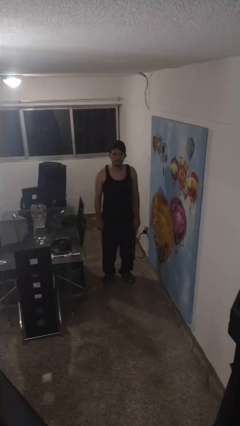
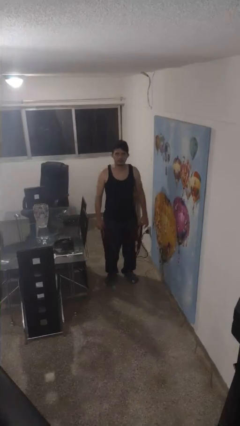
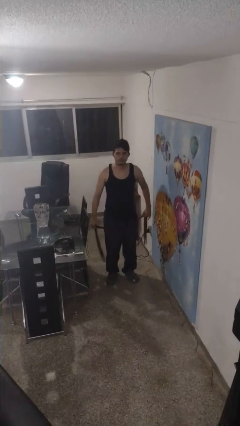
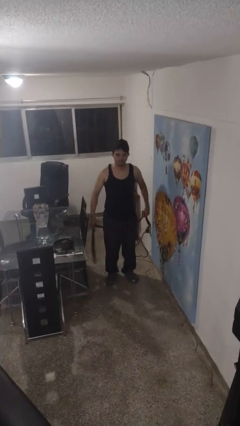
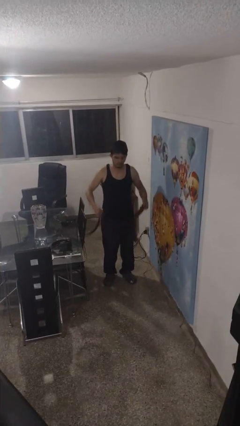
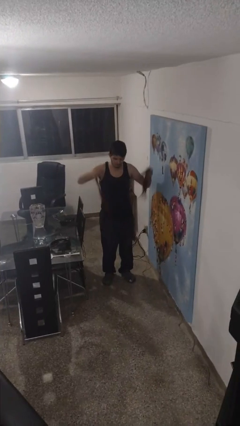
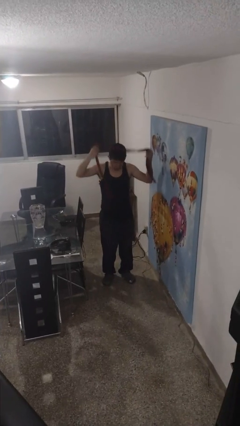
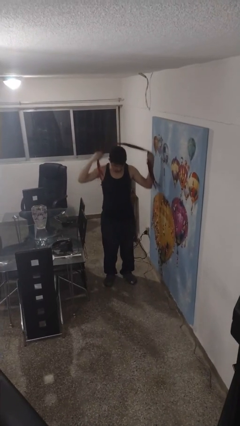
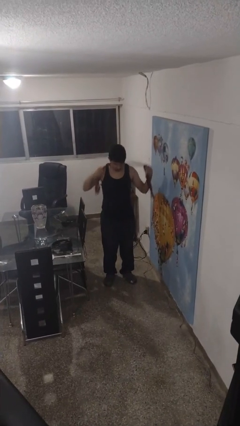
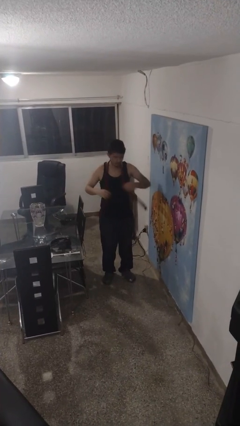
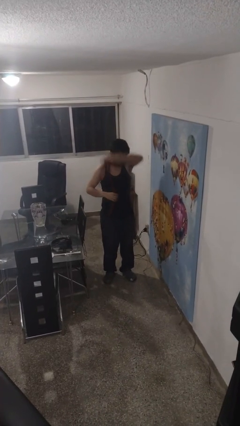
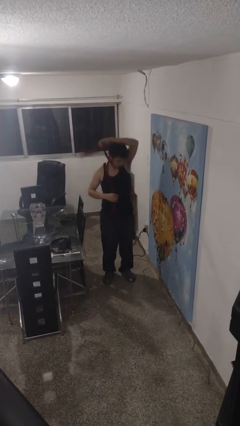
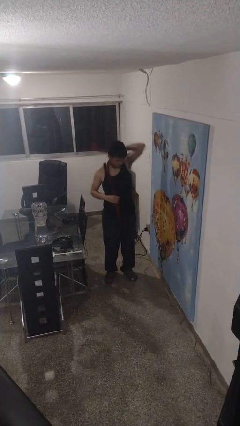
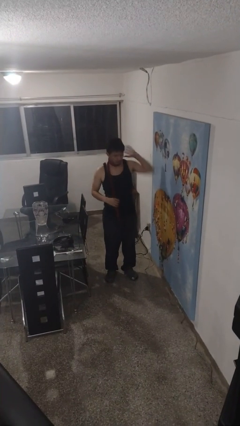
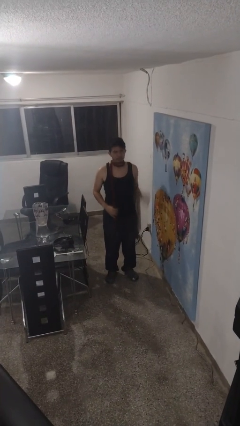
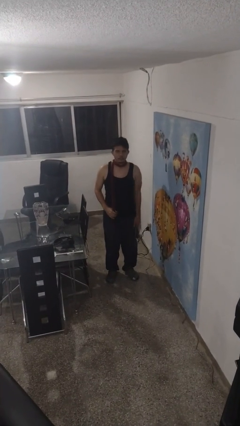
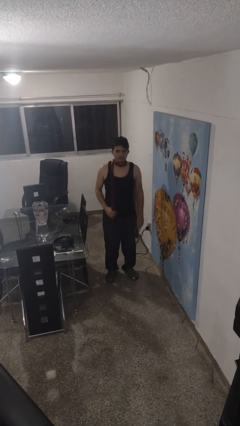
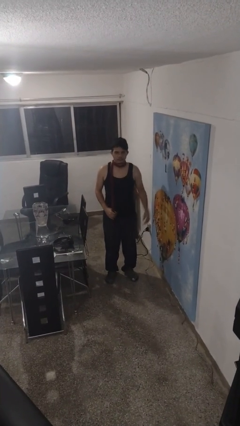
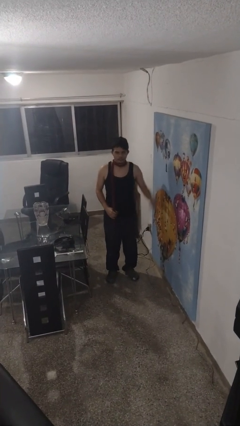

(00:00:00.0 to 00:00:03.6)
person puts on scarf

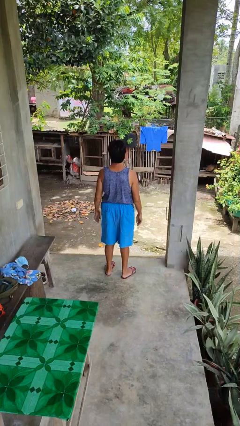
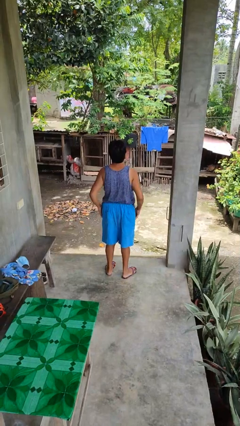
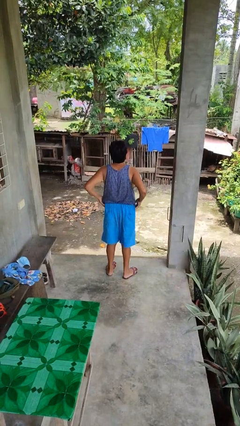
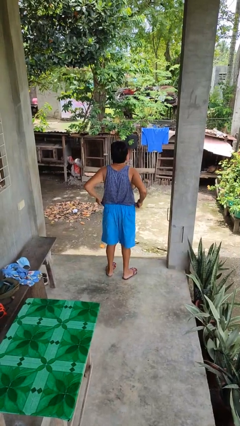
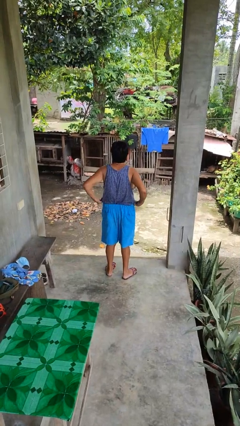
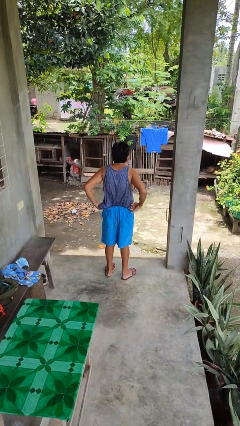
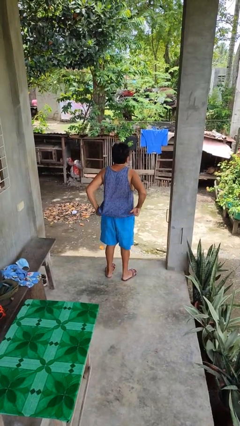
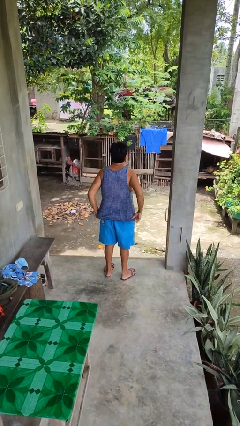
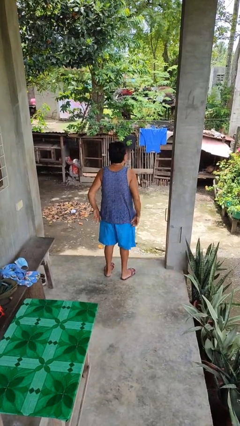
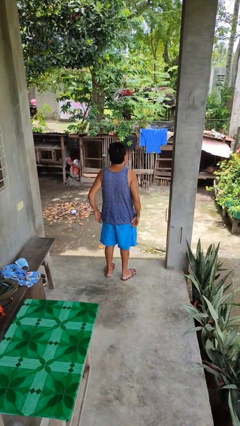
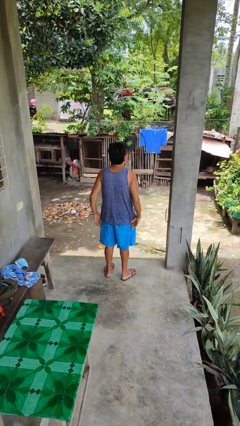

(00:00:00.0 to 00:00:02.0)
person untucks shirt

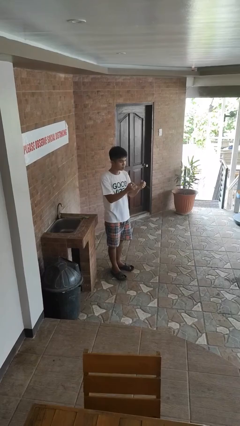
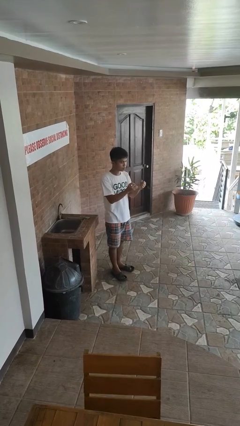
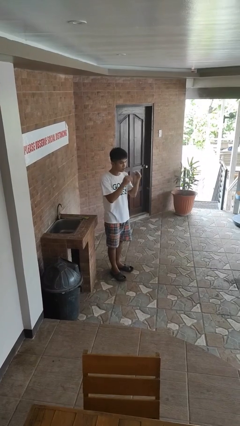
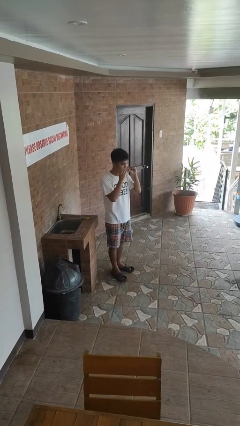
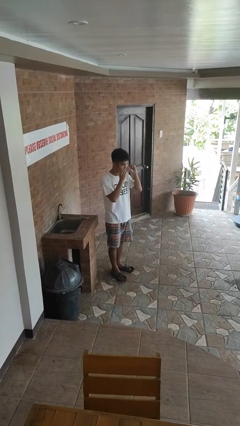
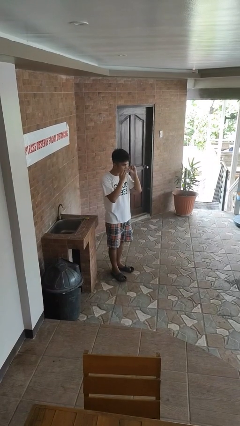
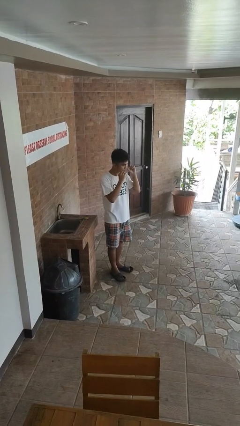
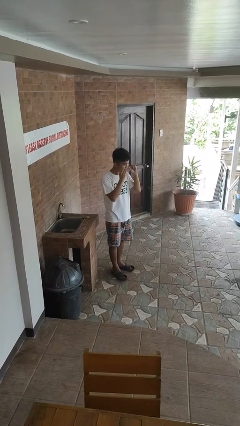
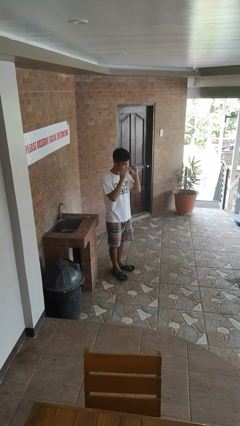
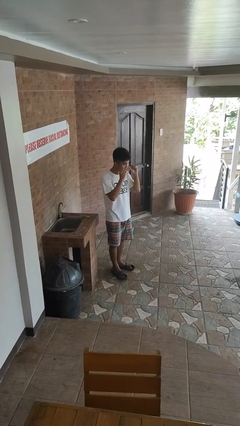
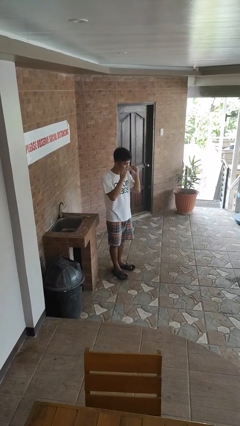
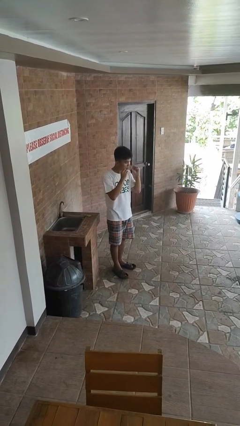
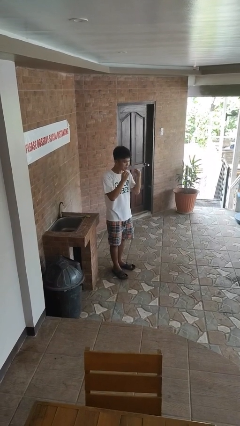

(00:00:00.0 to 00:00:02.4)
person flosses

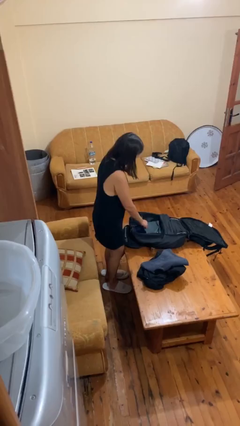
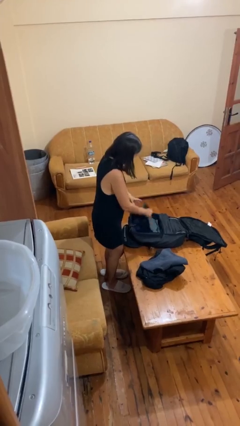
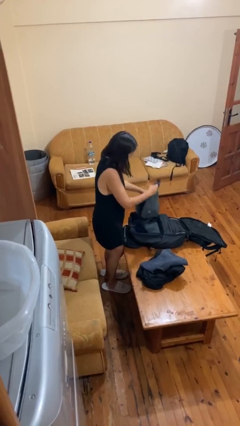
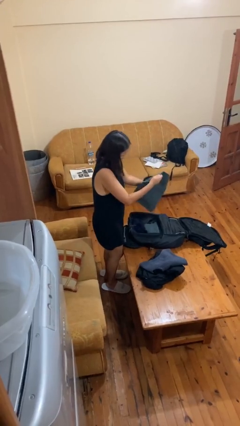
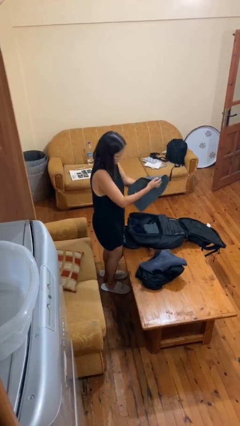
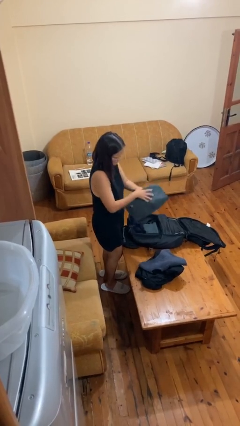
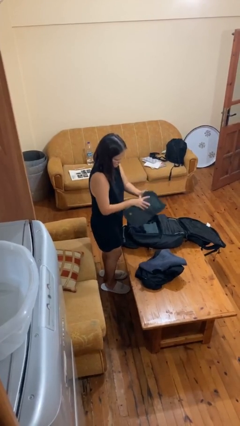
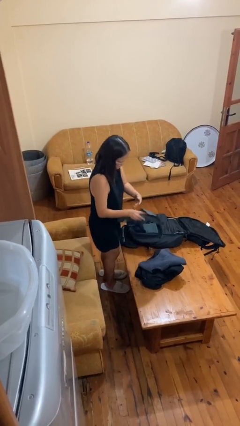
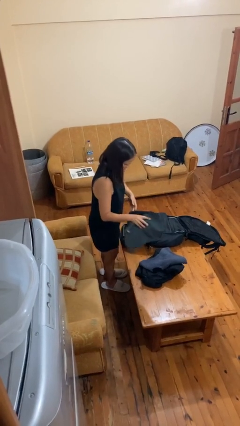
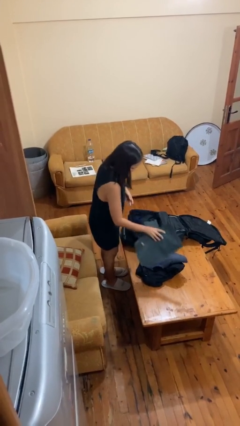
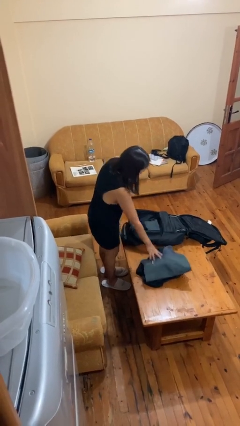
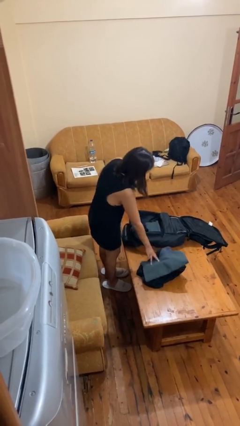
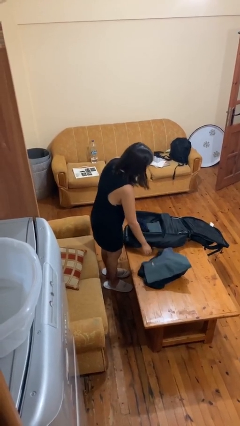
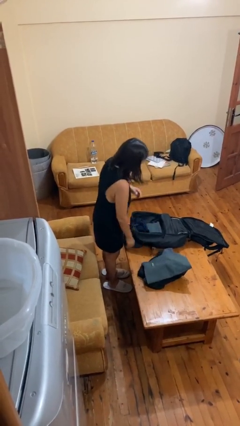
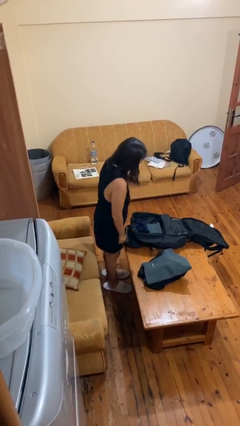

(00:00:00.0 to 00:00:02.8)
person unloads clothes from suitcase

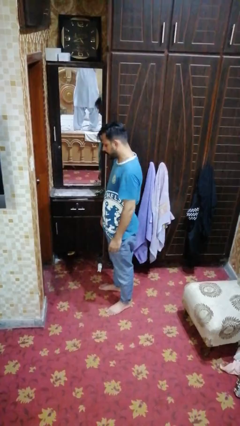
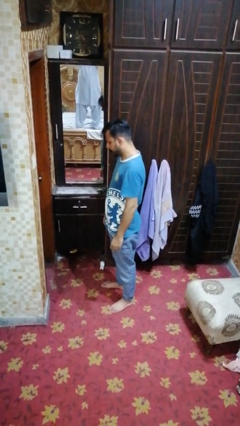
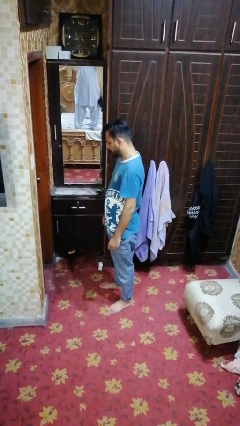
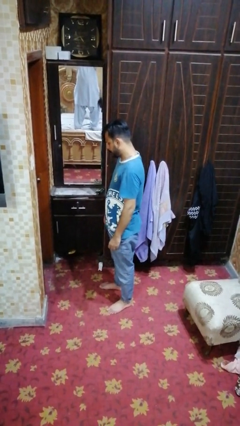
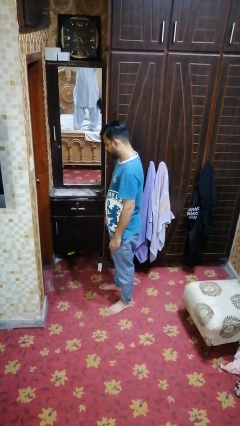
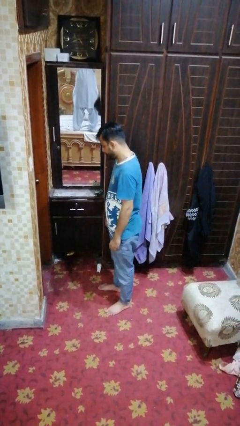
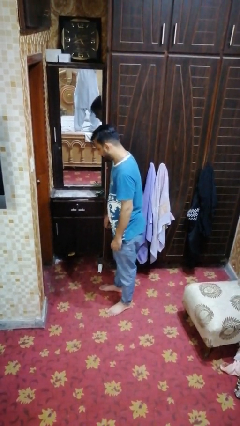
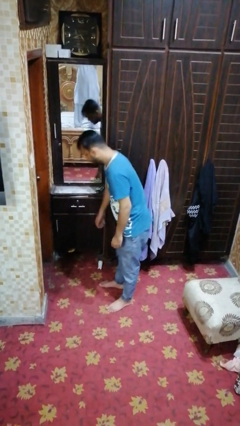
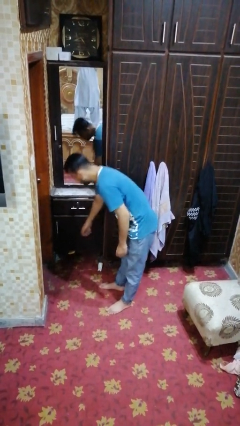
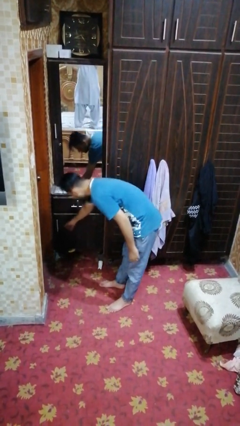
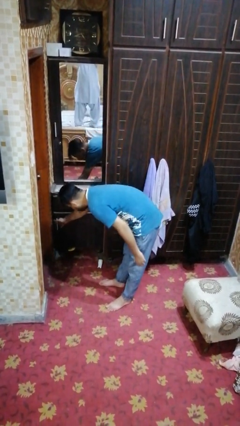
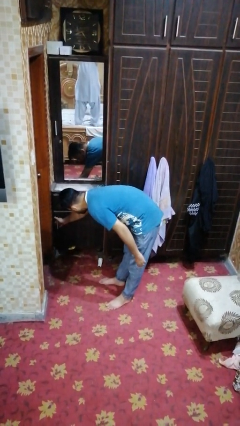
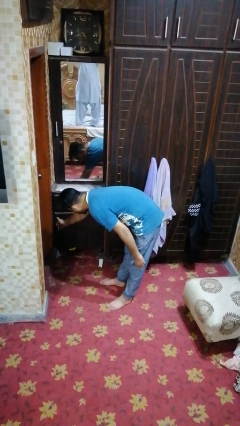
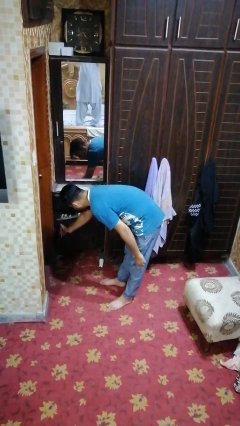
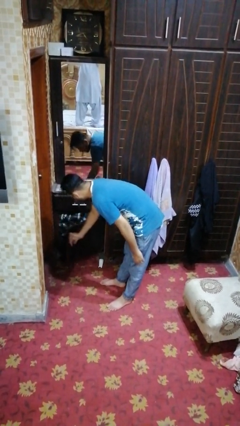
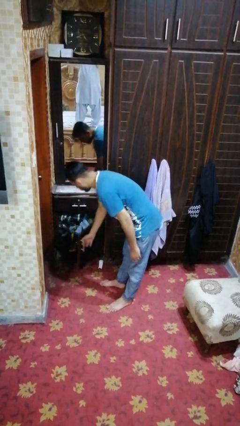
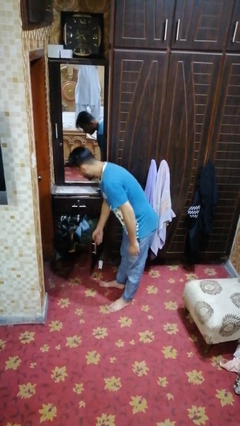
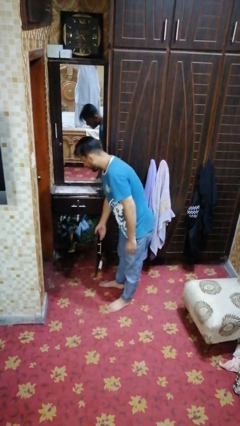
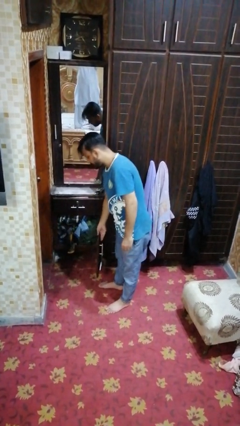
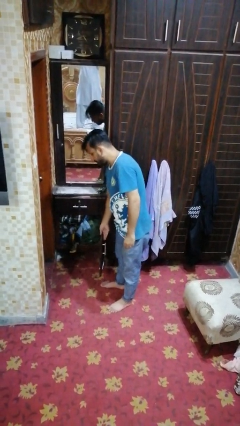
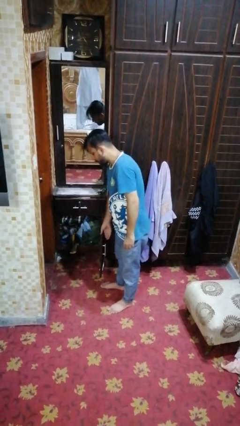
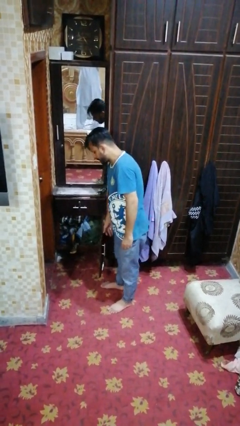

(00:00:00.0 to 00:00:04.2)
person opens dresser drawer

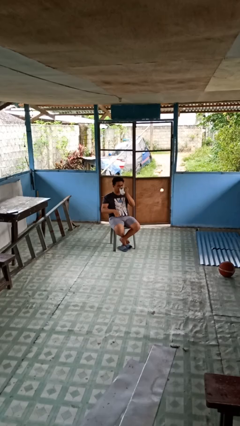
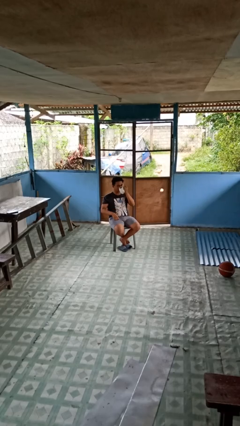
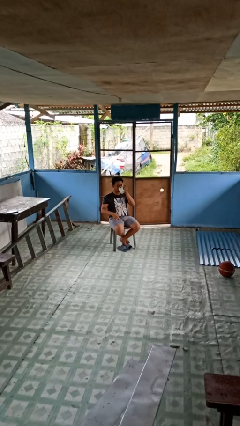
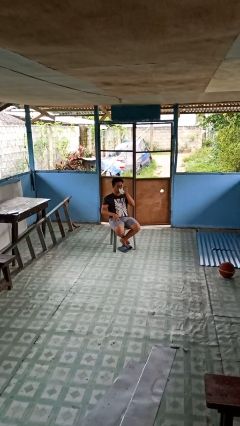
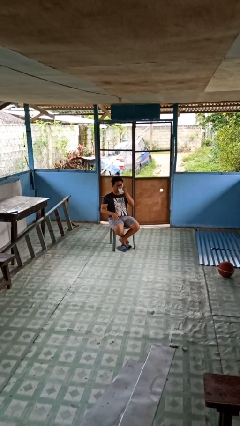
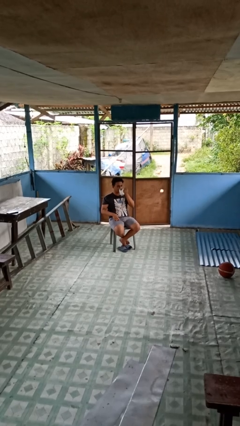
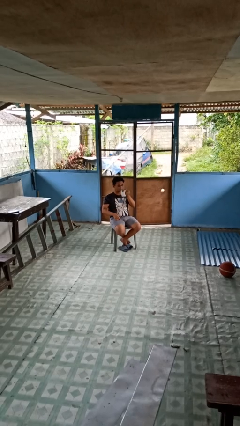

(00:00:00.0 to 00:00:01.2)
person drinks from mug

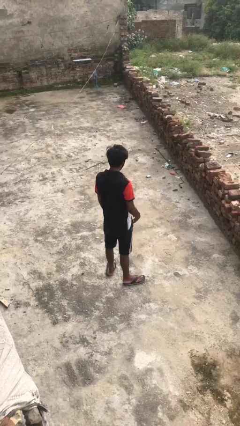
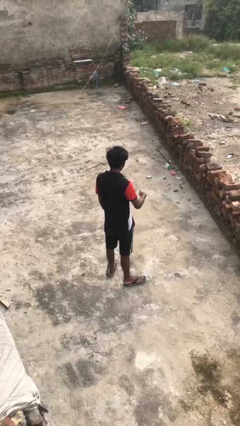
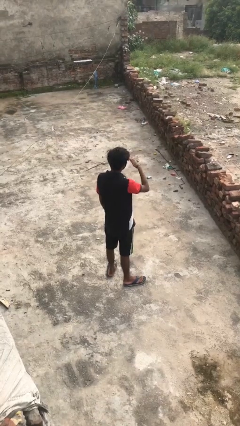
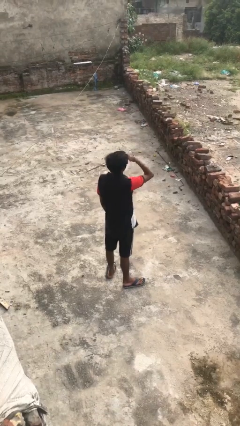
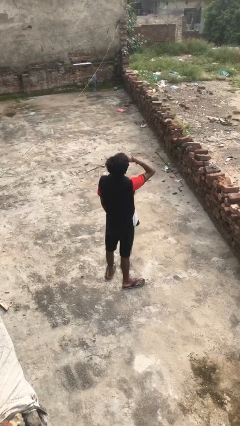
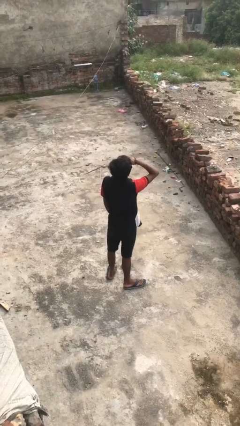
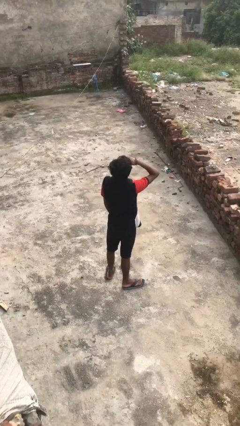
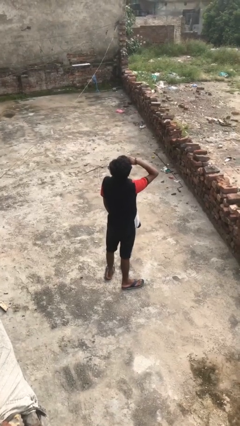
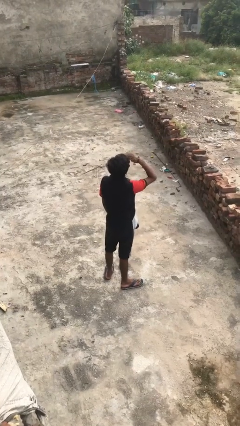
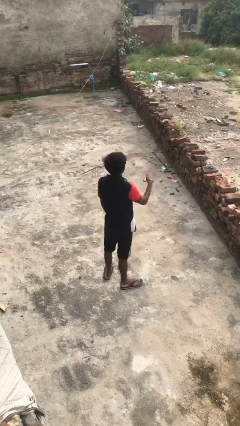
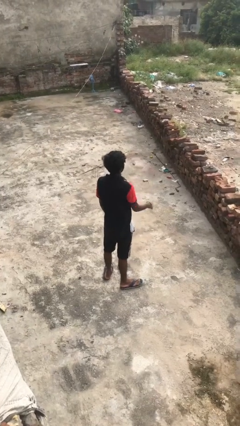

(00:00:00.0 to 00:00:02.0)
person shades eyes
